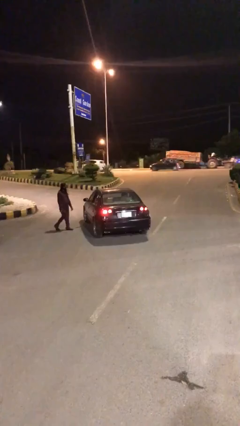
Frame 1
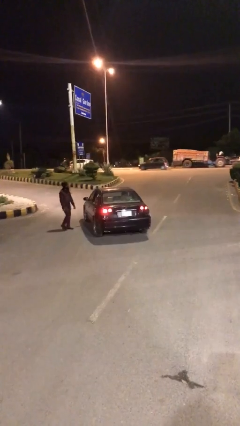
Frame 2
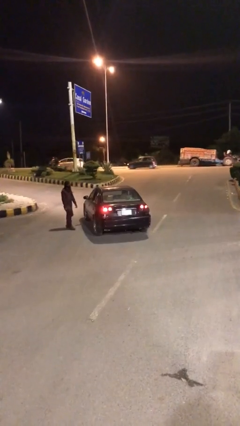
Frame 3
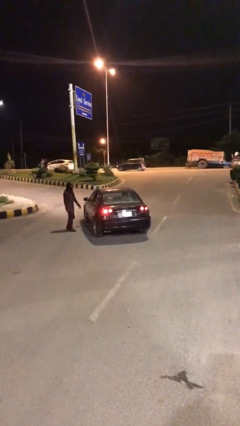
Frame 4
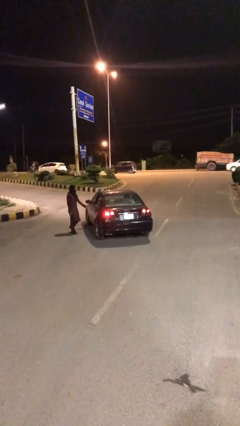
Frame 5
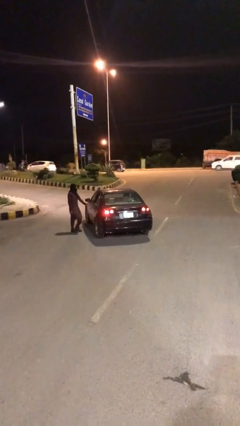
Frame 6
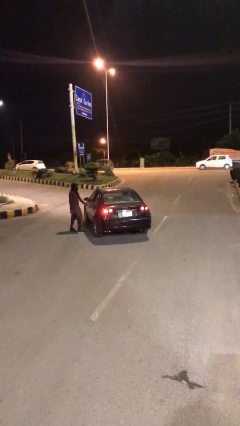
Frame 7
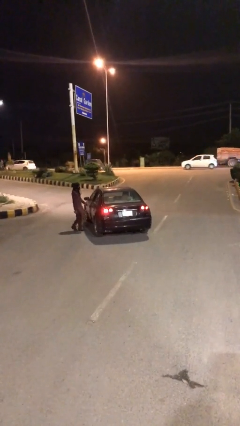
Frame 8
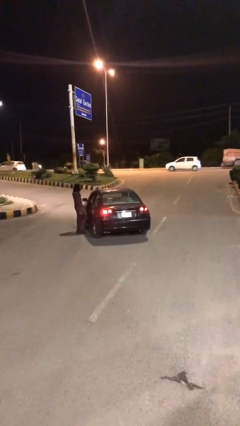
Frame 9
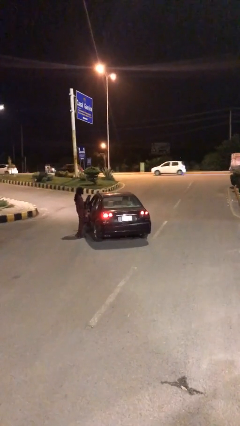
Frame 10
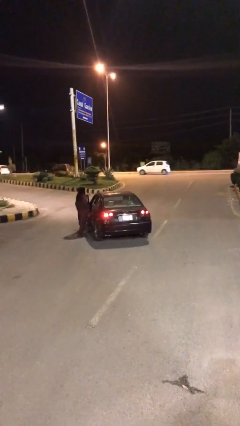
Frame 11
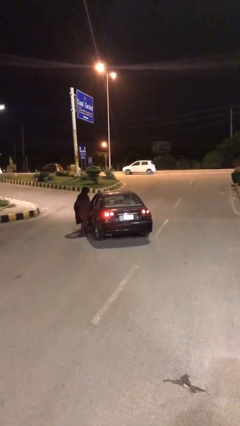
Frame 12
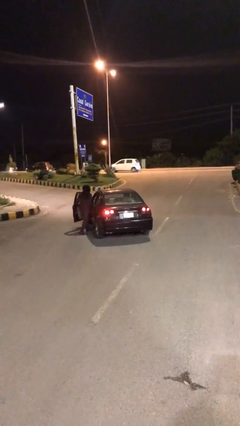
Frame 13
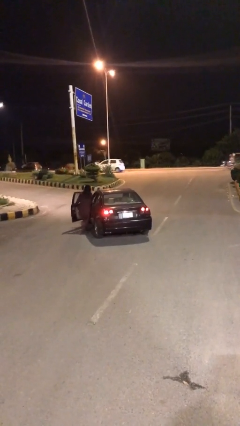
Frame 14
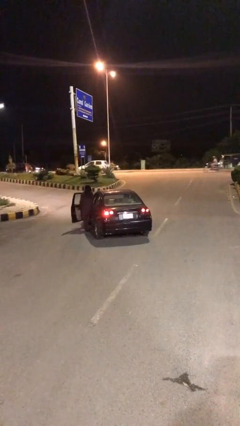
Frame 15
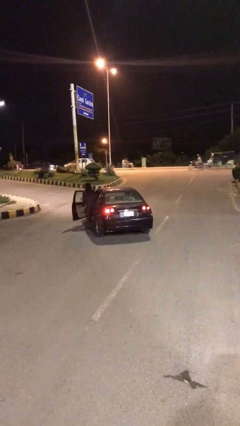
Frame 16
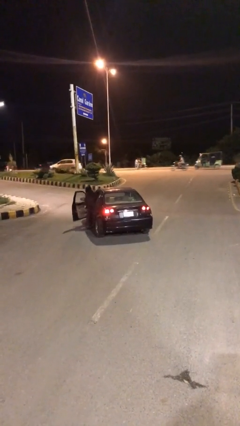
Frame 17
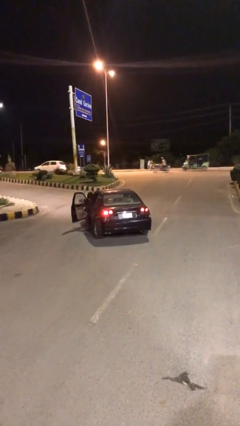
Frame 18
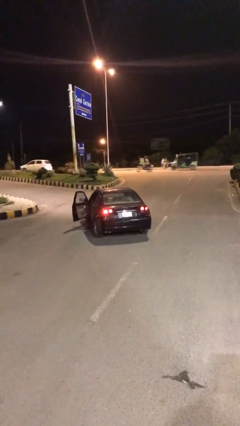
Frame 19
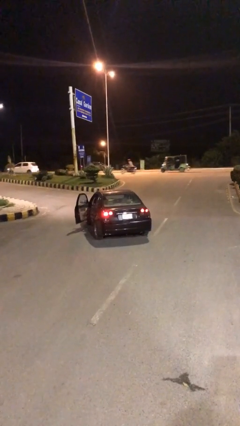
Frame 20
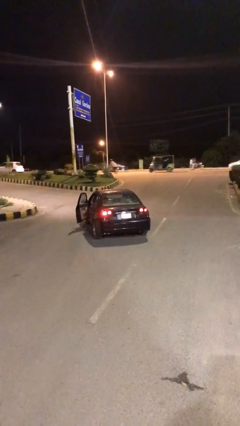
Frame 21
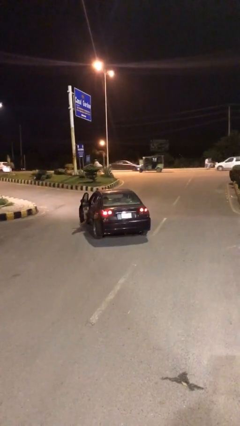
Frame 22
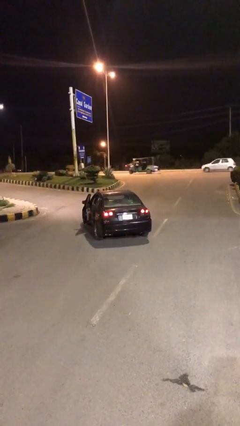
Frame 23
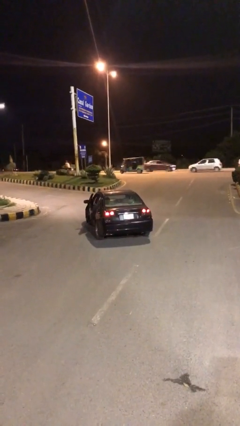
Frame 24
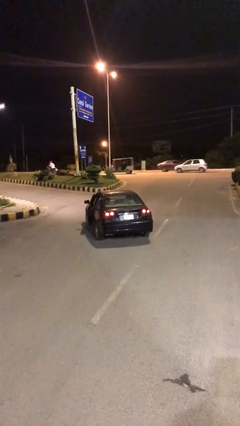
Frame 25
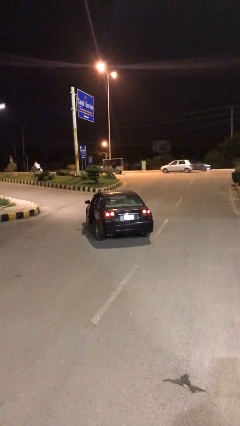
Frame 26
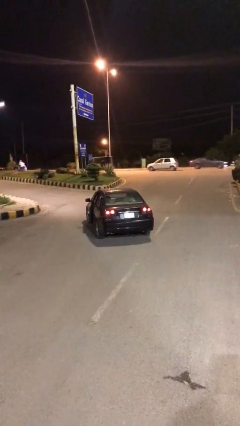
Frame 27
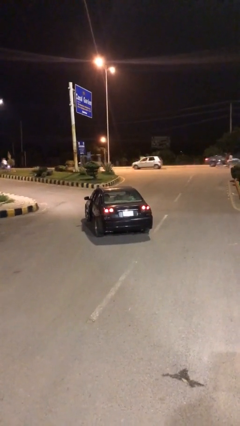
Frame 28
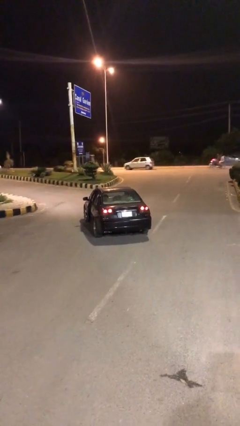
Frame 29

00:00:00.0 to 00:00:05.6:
car picks up person

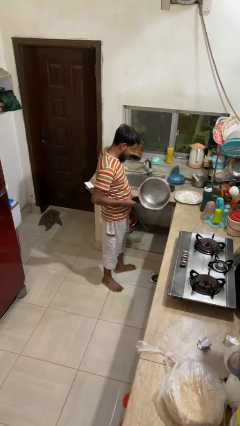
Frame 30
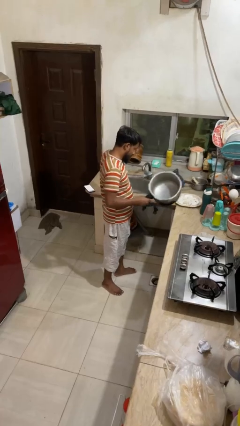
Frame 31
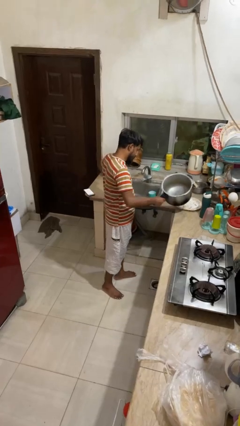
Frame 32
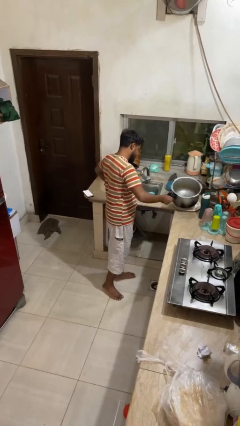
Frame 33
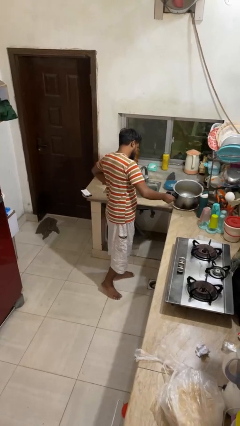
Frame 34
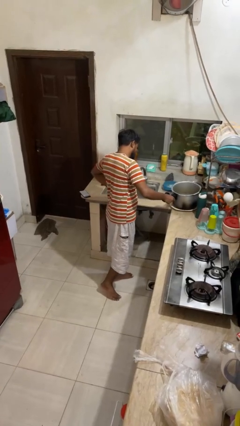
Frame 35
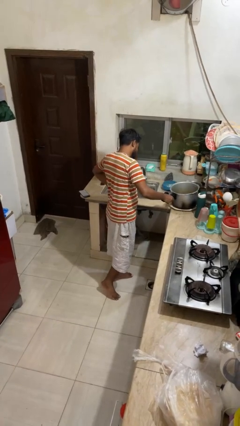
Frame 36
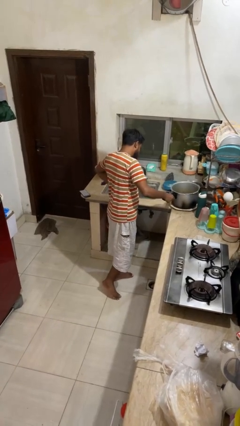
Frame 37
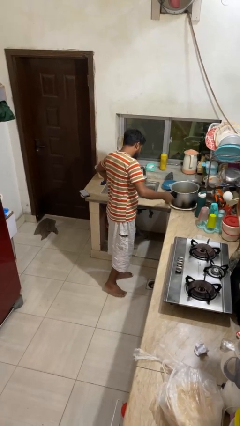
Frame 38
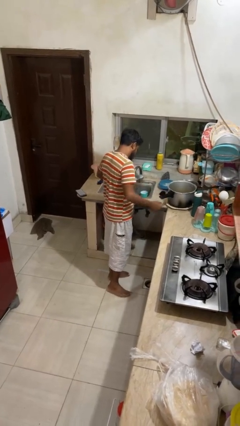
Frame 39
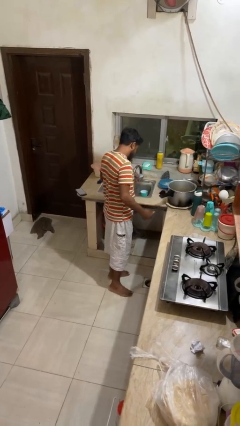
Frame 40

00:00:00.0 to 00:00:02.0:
person puts down object on countertop

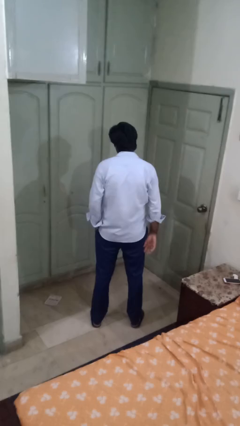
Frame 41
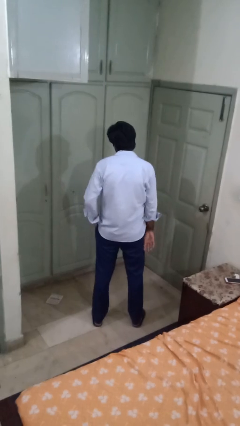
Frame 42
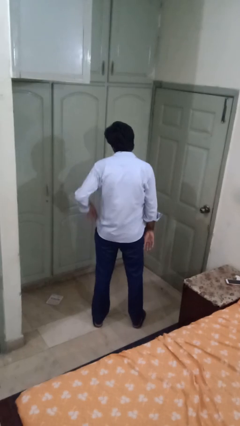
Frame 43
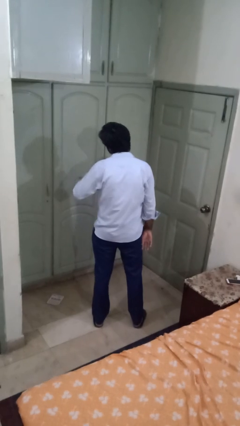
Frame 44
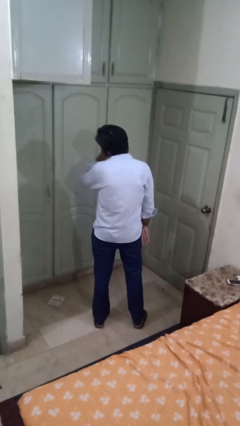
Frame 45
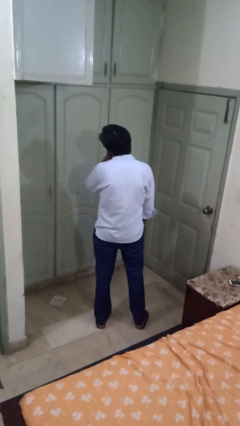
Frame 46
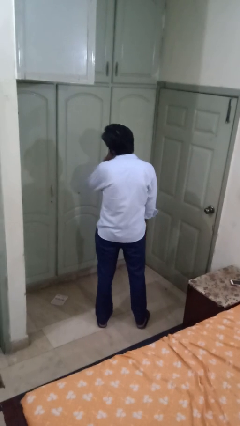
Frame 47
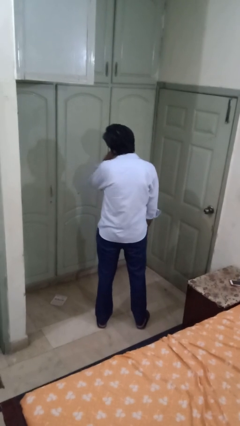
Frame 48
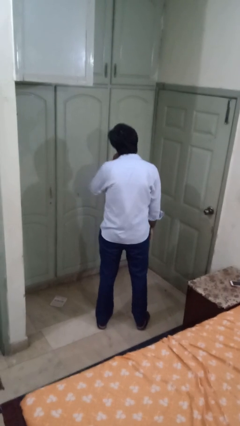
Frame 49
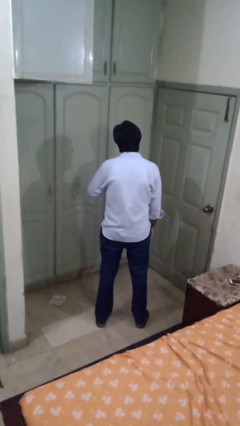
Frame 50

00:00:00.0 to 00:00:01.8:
person strokes chin

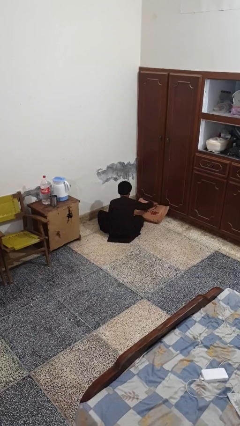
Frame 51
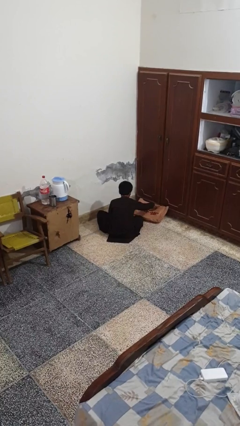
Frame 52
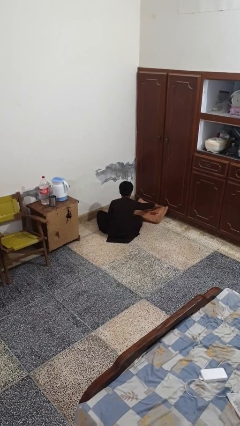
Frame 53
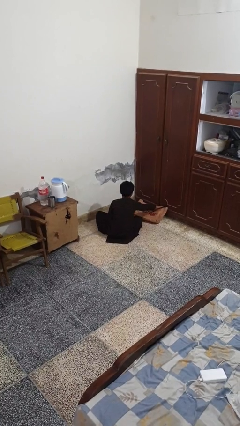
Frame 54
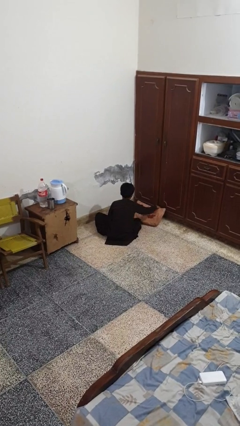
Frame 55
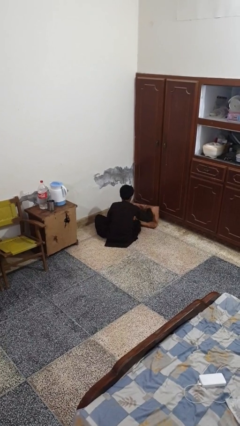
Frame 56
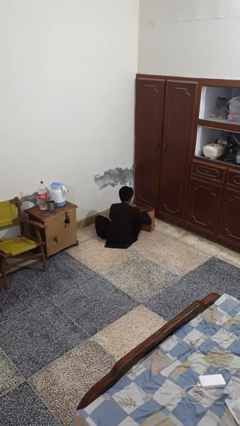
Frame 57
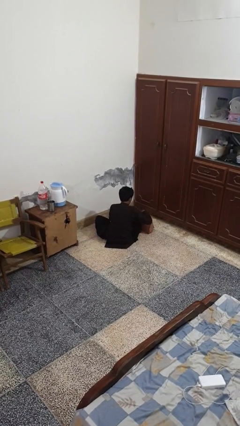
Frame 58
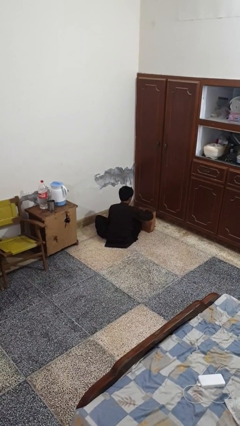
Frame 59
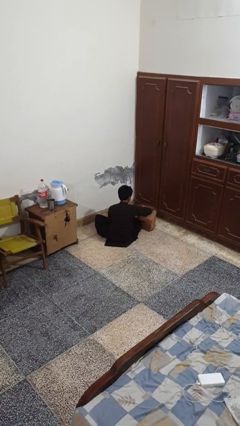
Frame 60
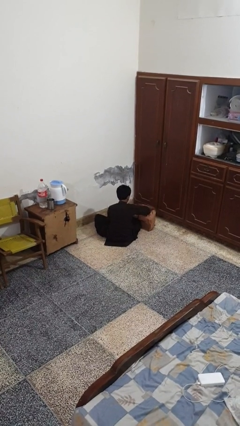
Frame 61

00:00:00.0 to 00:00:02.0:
person takes object from bag

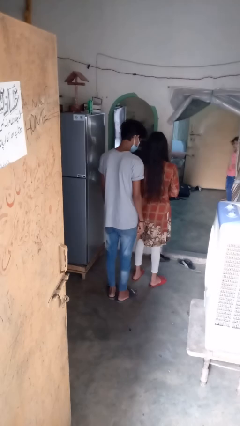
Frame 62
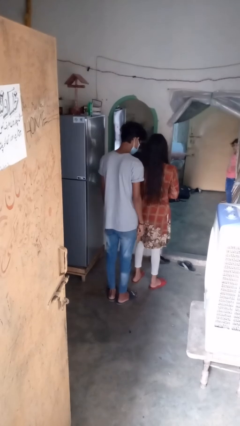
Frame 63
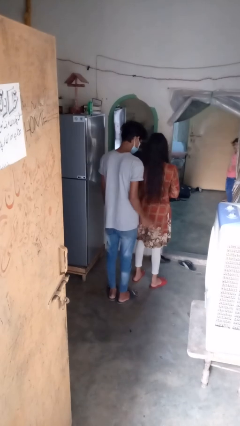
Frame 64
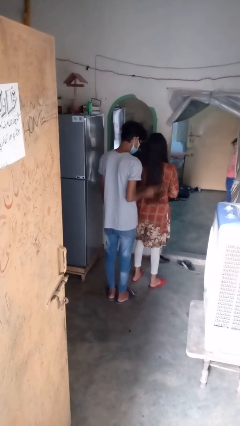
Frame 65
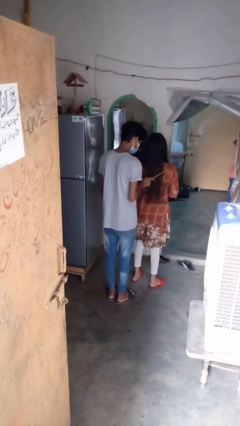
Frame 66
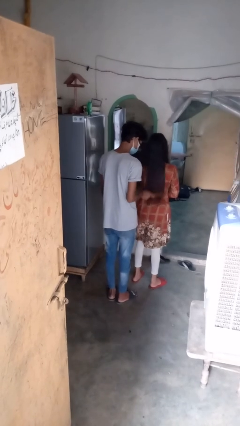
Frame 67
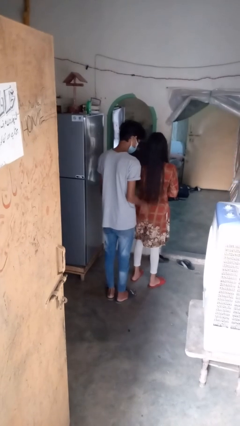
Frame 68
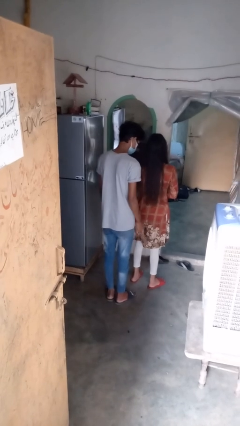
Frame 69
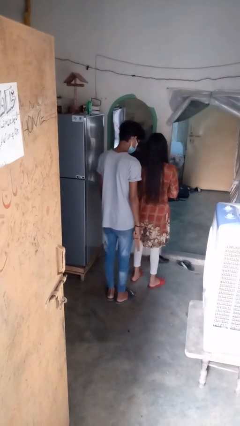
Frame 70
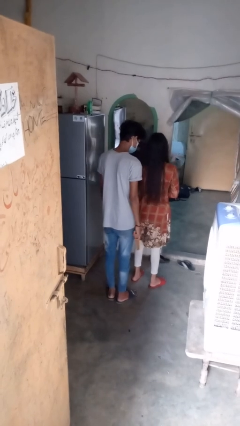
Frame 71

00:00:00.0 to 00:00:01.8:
person brushes hair of person

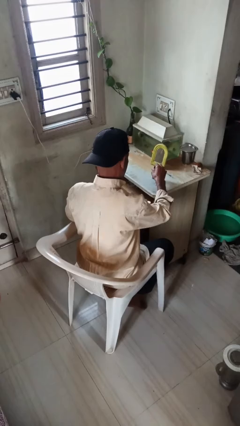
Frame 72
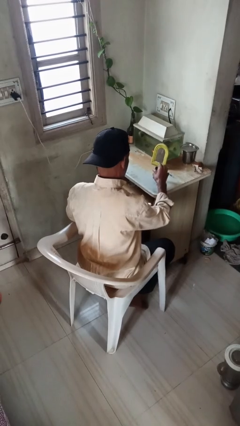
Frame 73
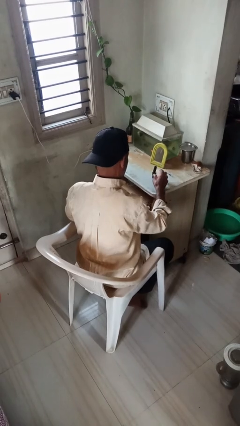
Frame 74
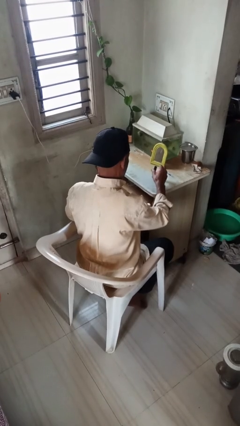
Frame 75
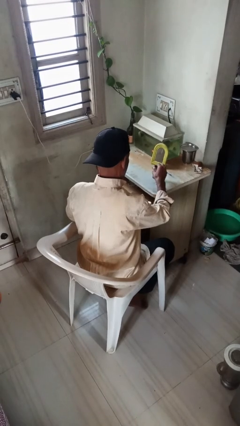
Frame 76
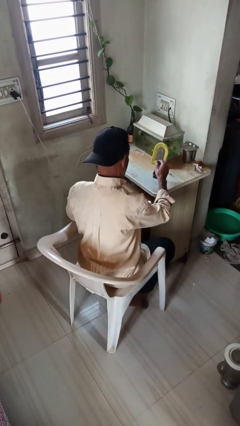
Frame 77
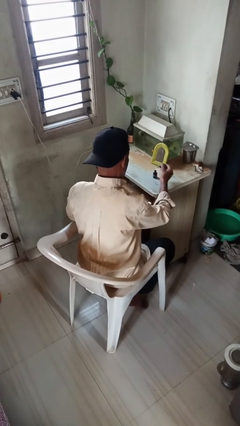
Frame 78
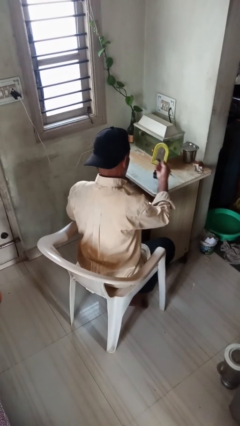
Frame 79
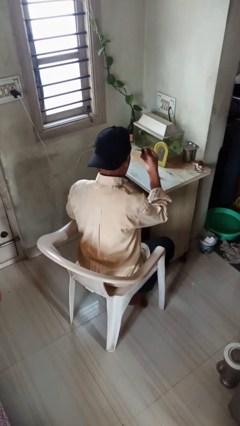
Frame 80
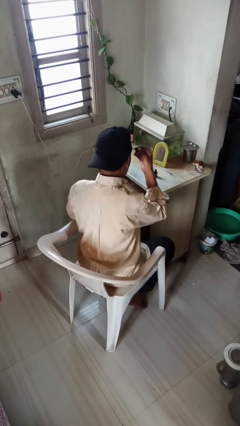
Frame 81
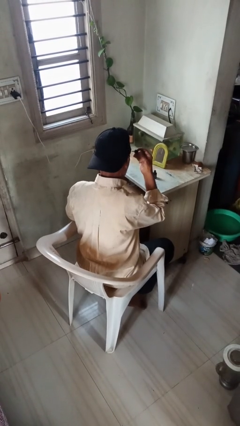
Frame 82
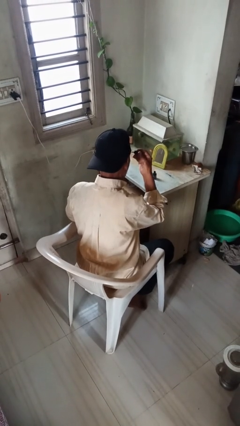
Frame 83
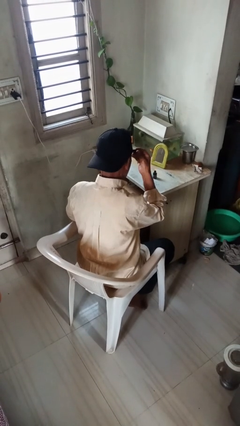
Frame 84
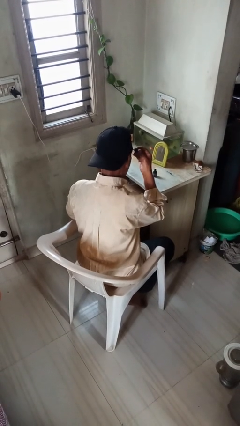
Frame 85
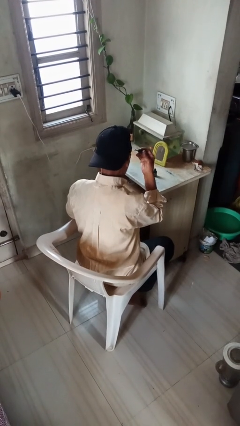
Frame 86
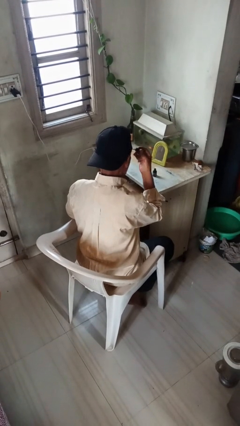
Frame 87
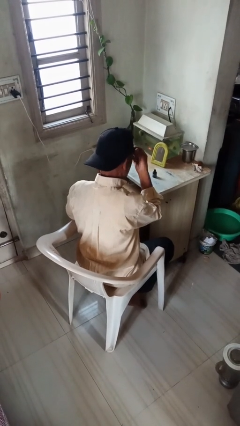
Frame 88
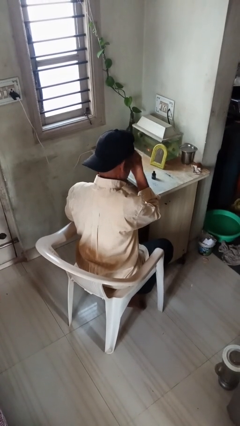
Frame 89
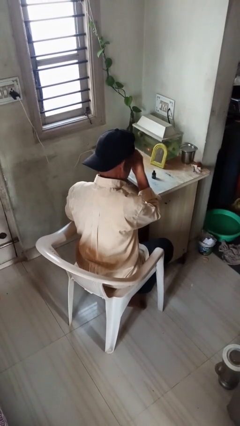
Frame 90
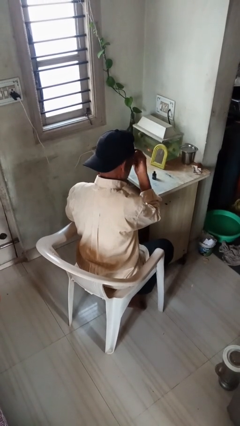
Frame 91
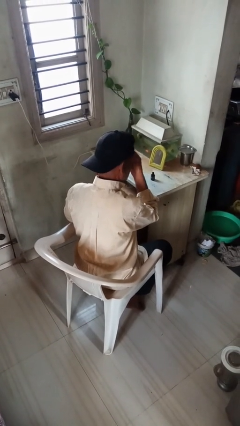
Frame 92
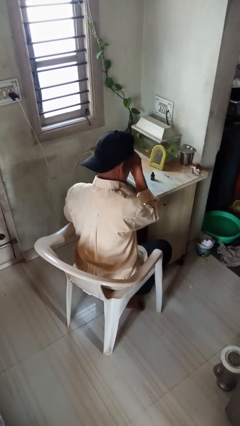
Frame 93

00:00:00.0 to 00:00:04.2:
person applies eye makeup
